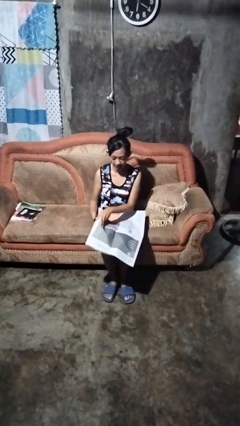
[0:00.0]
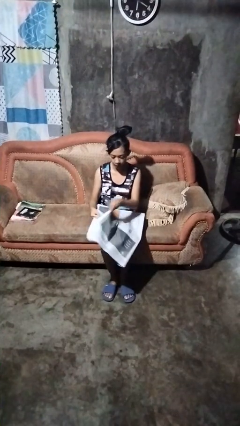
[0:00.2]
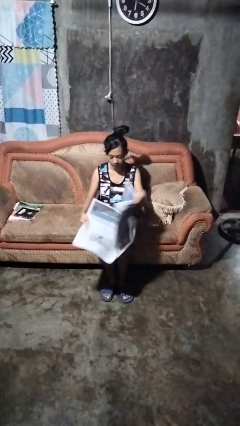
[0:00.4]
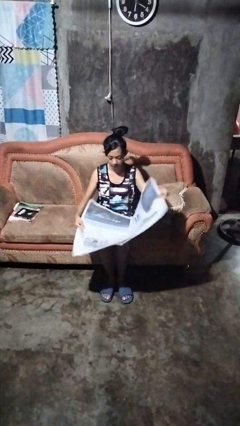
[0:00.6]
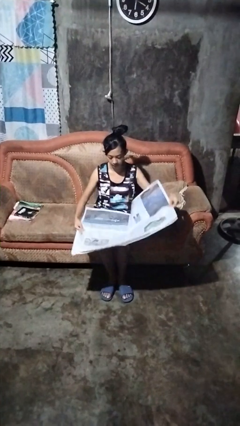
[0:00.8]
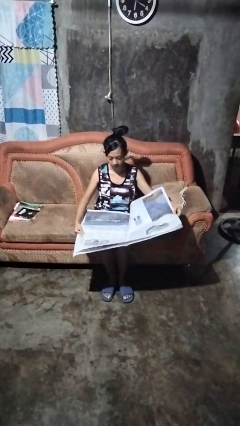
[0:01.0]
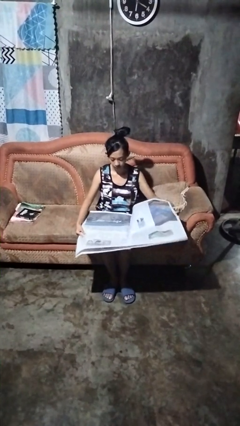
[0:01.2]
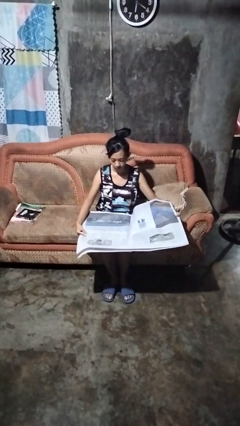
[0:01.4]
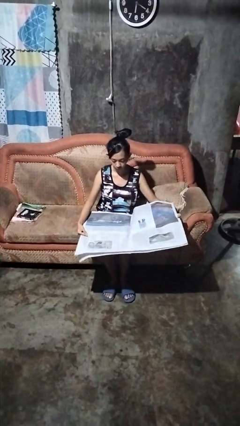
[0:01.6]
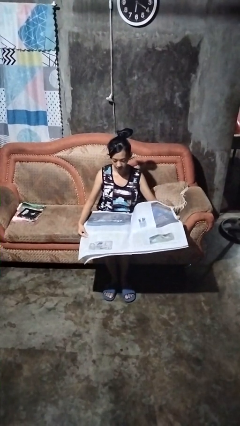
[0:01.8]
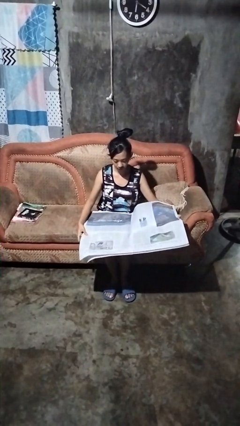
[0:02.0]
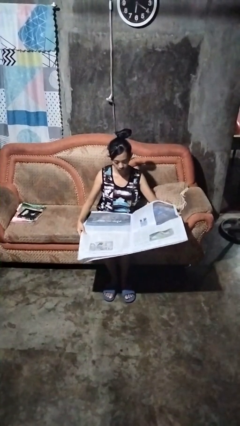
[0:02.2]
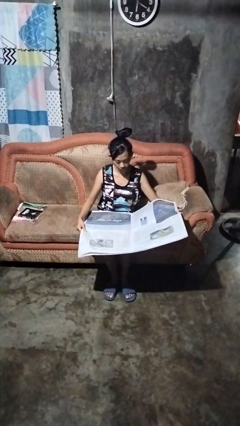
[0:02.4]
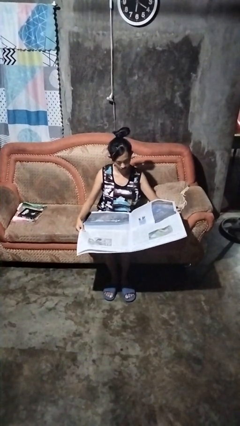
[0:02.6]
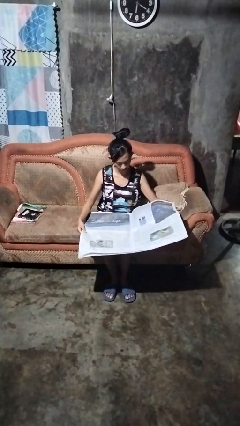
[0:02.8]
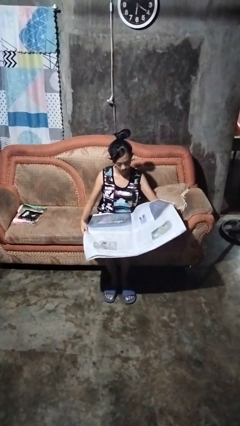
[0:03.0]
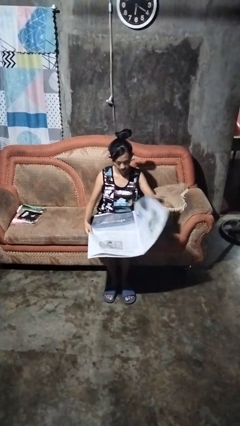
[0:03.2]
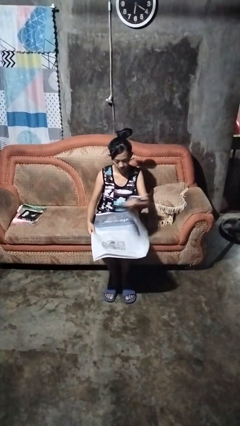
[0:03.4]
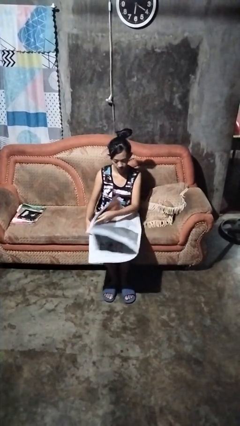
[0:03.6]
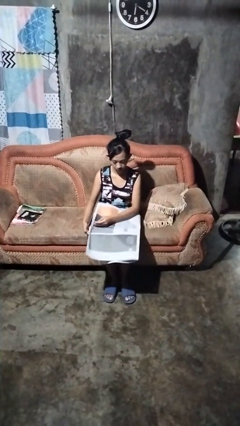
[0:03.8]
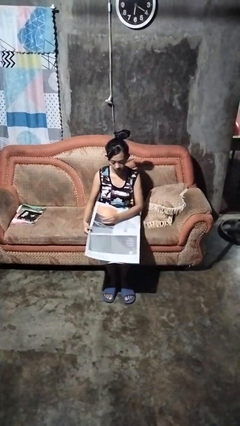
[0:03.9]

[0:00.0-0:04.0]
person reads newspaper

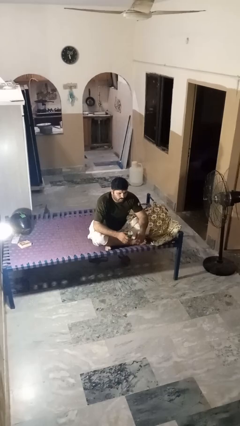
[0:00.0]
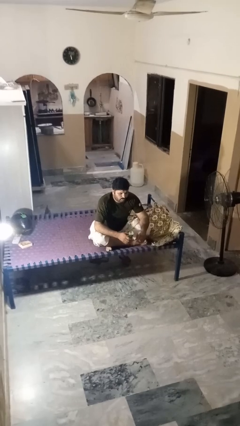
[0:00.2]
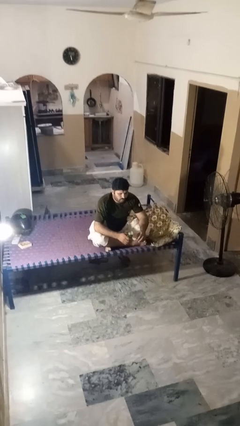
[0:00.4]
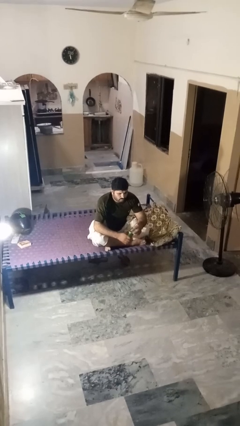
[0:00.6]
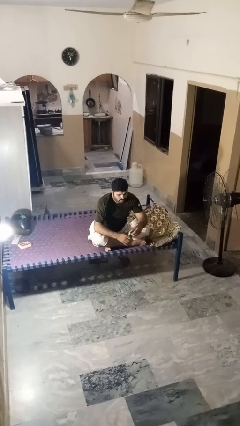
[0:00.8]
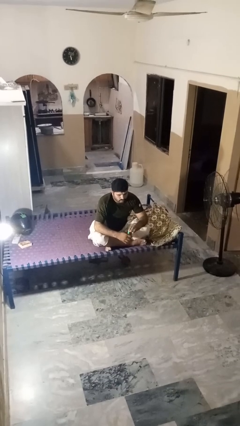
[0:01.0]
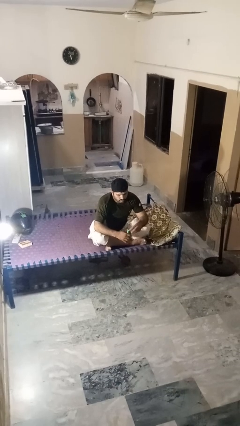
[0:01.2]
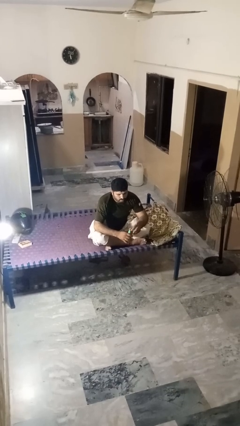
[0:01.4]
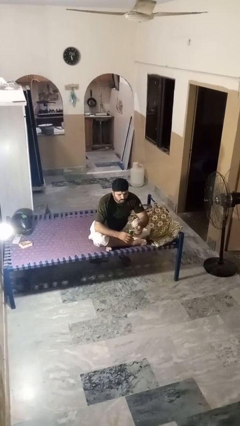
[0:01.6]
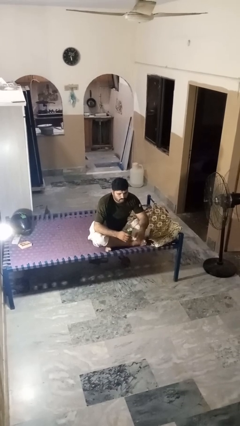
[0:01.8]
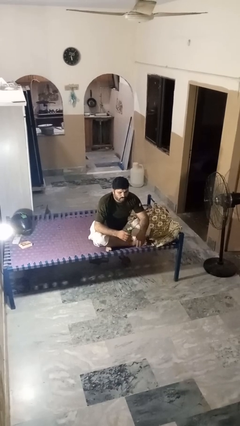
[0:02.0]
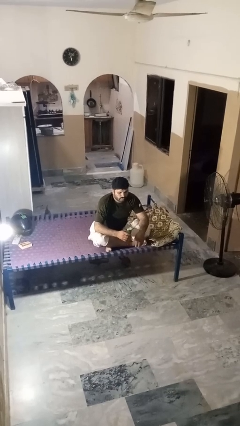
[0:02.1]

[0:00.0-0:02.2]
person opens beverage can

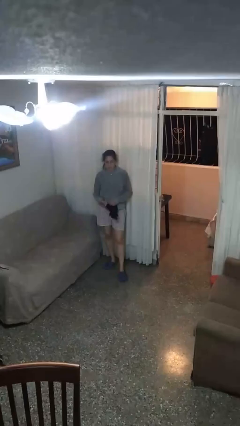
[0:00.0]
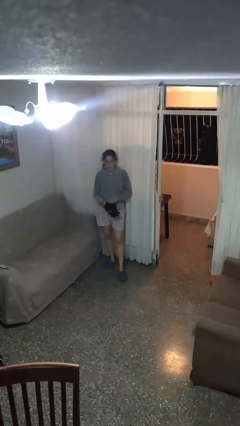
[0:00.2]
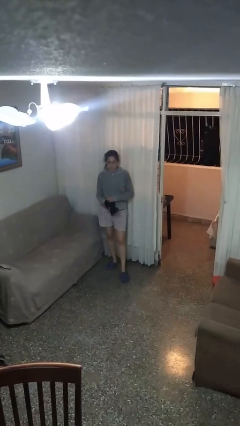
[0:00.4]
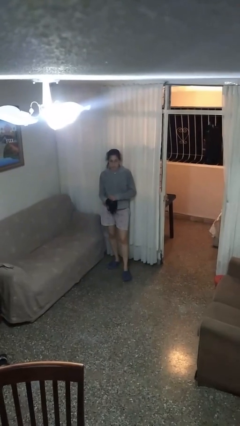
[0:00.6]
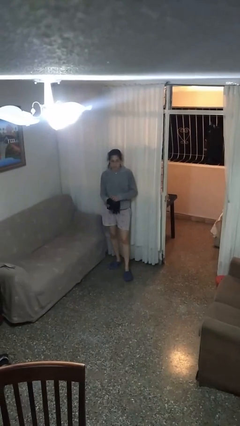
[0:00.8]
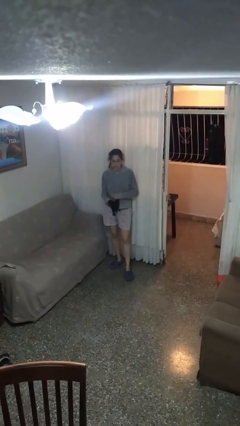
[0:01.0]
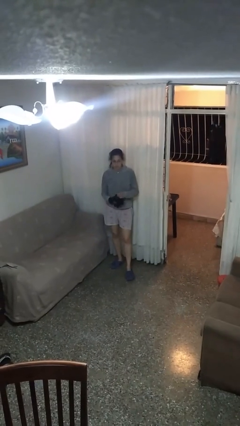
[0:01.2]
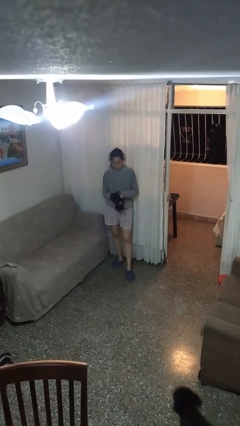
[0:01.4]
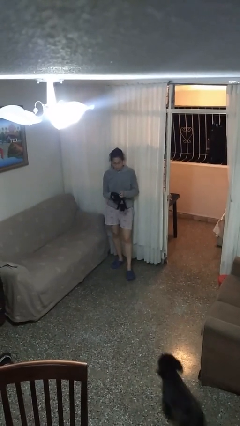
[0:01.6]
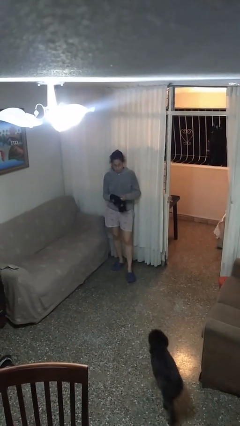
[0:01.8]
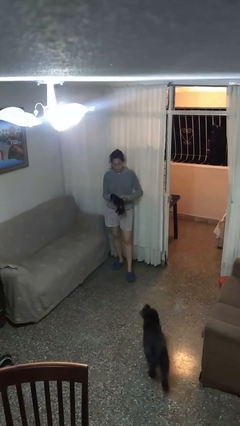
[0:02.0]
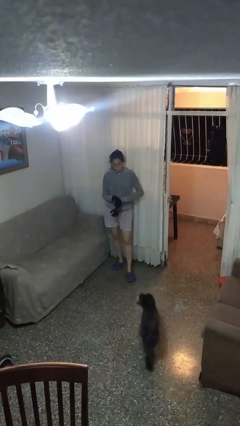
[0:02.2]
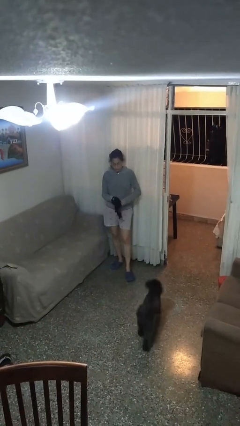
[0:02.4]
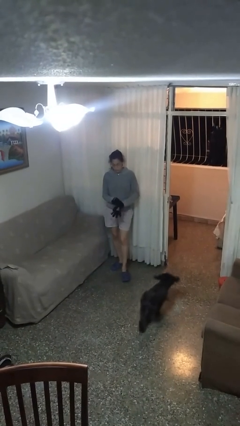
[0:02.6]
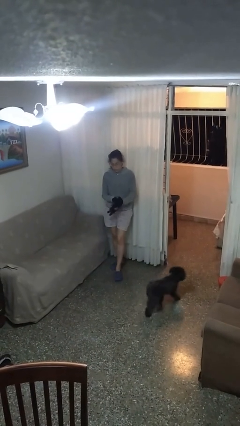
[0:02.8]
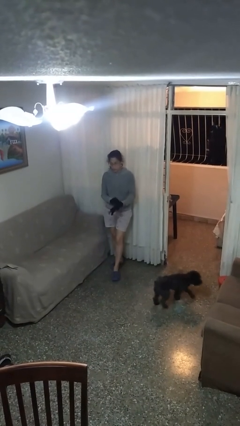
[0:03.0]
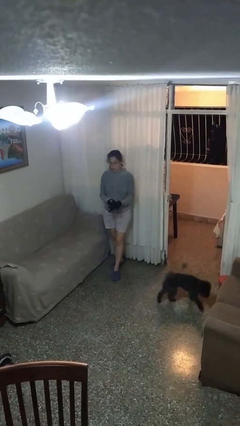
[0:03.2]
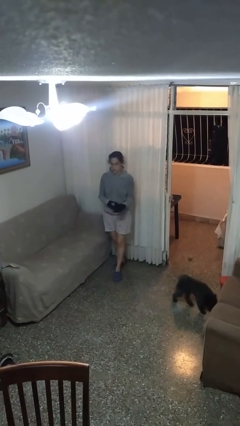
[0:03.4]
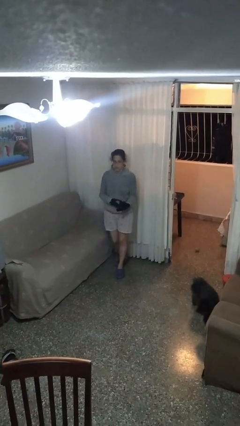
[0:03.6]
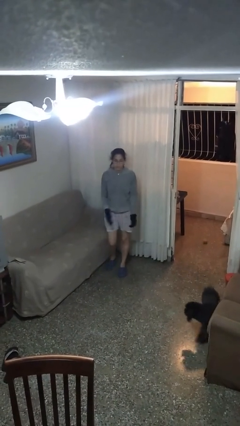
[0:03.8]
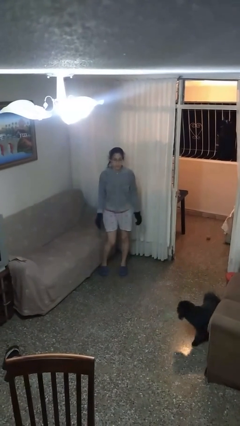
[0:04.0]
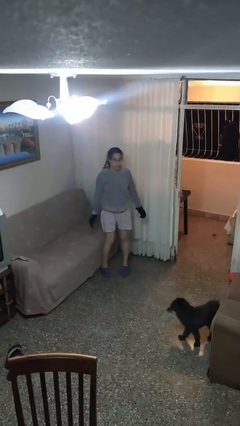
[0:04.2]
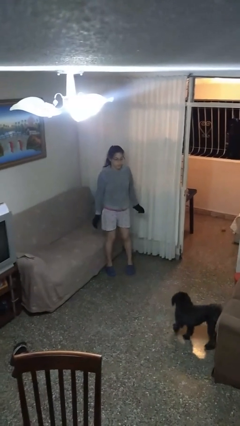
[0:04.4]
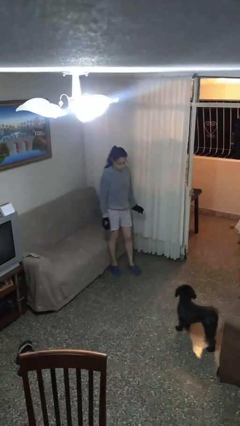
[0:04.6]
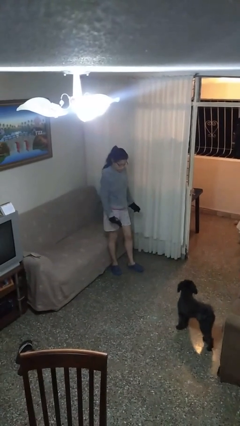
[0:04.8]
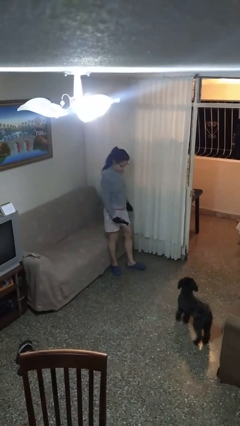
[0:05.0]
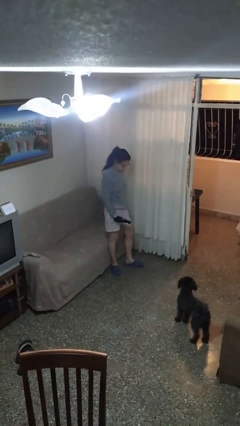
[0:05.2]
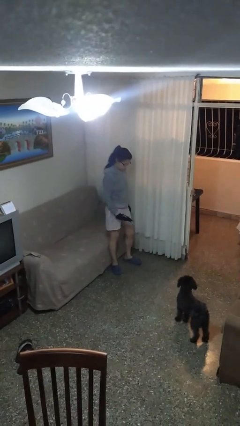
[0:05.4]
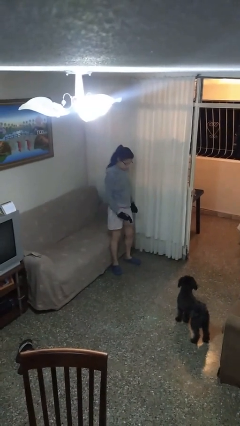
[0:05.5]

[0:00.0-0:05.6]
person puts on gloves

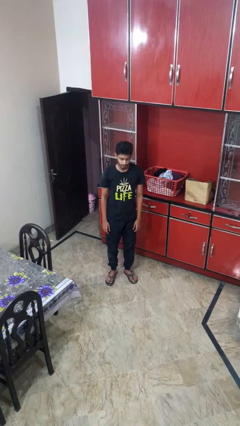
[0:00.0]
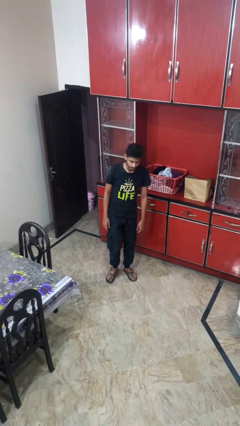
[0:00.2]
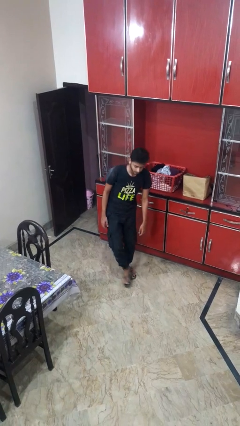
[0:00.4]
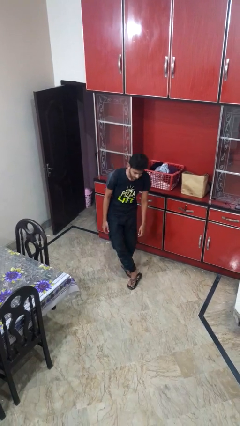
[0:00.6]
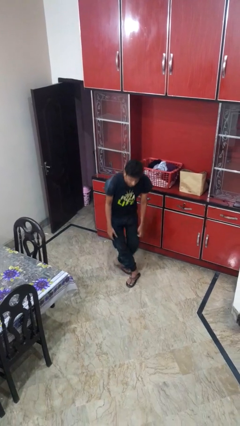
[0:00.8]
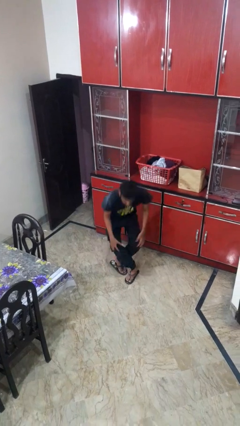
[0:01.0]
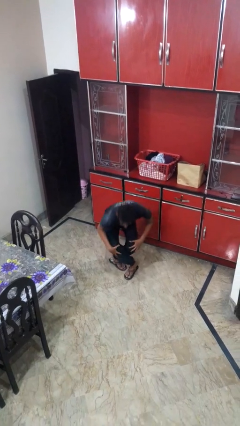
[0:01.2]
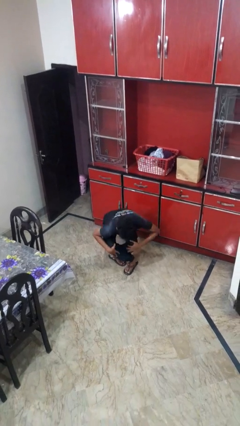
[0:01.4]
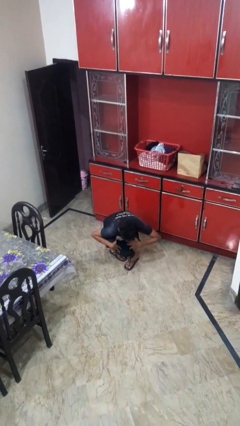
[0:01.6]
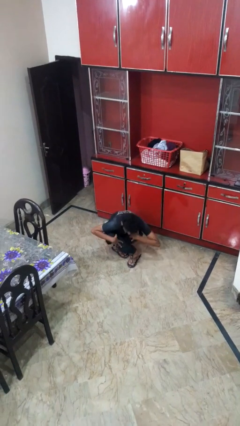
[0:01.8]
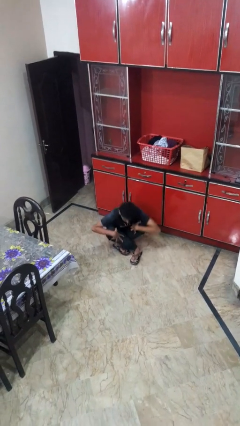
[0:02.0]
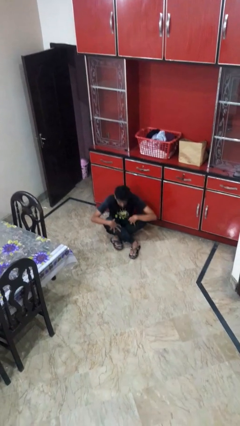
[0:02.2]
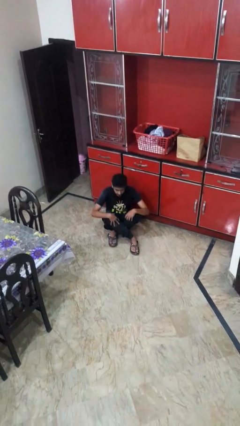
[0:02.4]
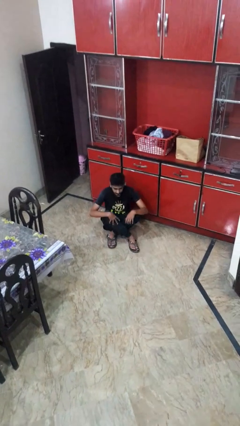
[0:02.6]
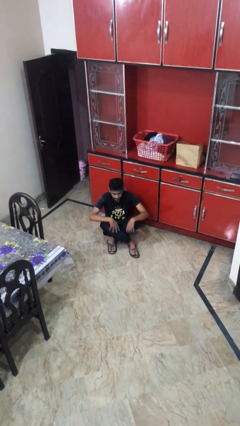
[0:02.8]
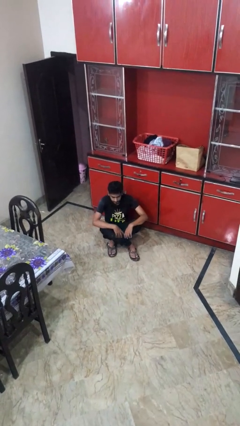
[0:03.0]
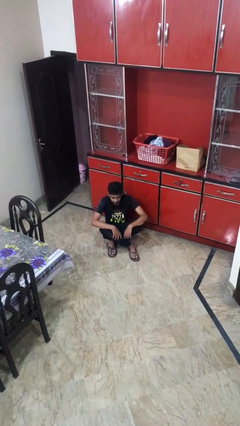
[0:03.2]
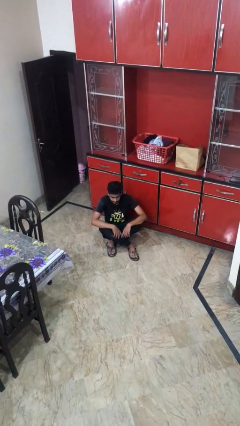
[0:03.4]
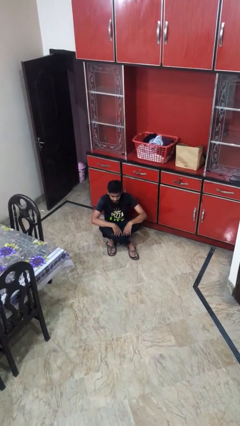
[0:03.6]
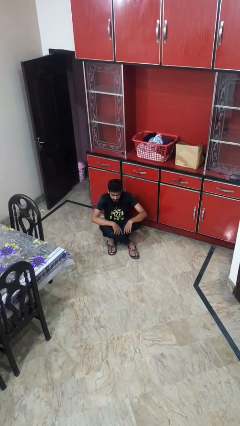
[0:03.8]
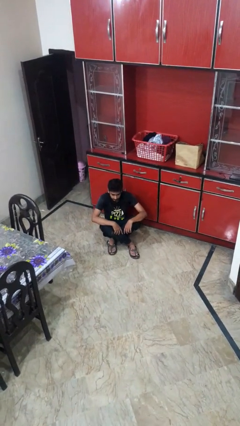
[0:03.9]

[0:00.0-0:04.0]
person sits crisscross

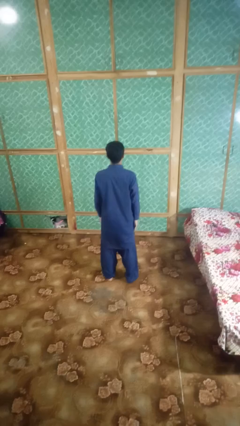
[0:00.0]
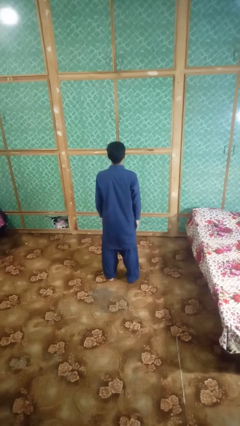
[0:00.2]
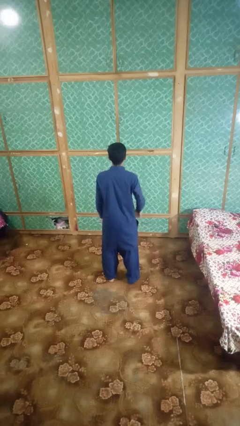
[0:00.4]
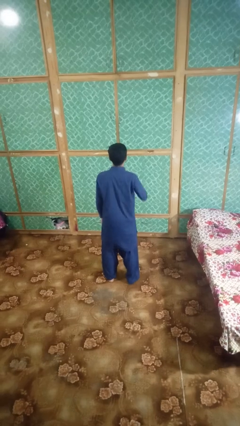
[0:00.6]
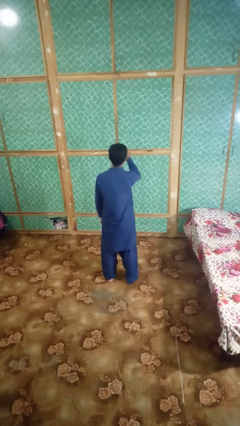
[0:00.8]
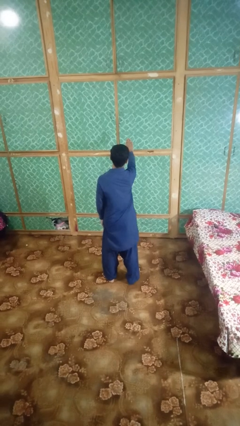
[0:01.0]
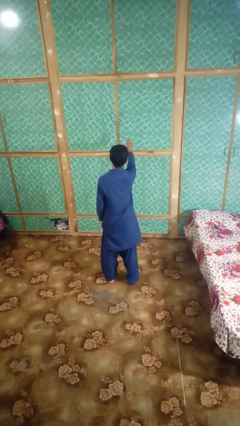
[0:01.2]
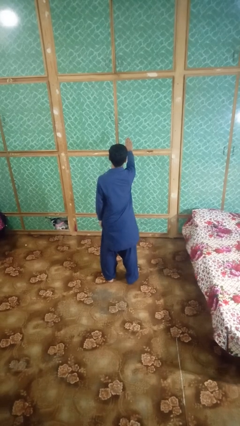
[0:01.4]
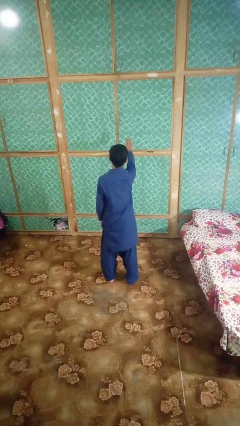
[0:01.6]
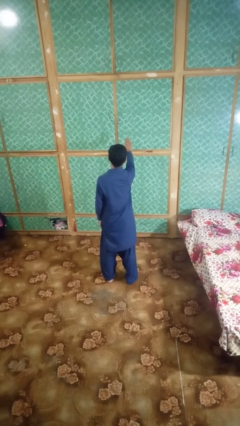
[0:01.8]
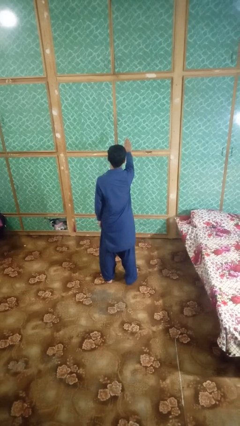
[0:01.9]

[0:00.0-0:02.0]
person gestures stop
